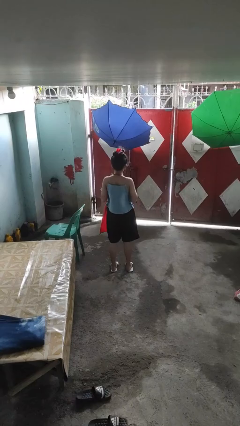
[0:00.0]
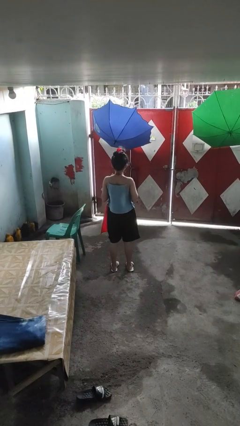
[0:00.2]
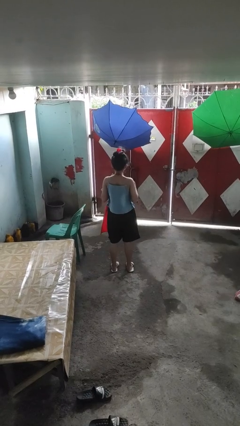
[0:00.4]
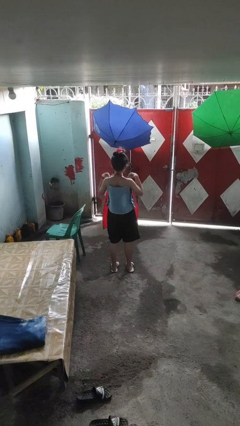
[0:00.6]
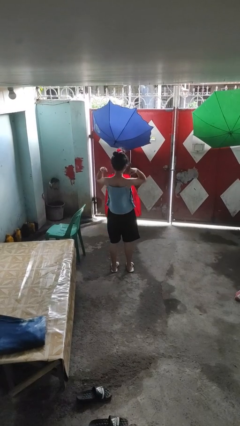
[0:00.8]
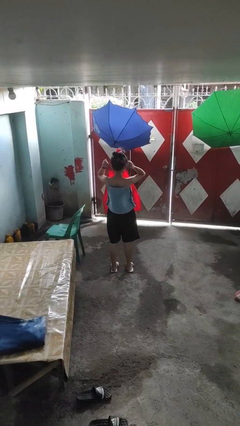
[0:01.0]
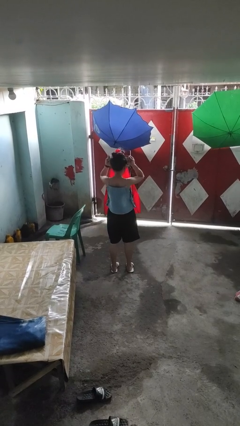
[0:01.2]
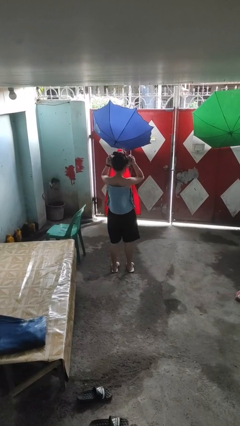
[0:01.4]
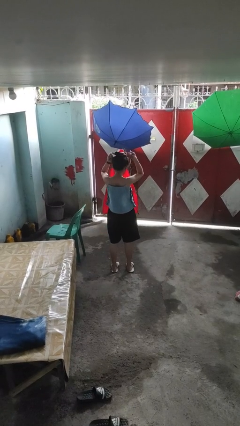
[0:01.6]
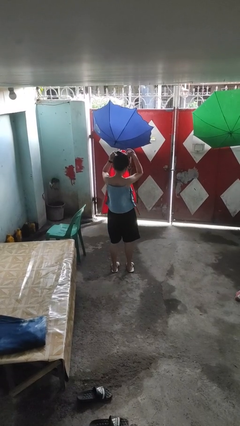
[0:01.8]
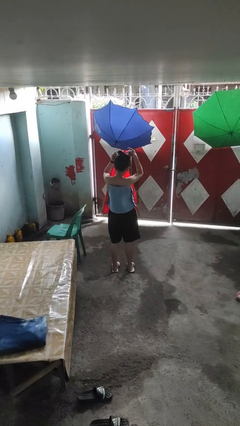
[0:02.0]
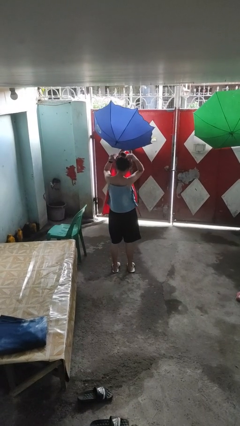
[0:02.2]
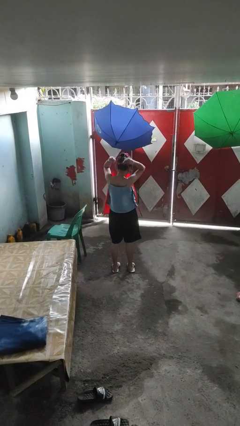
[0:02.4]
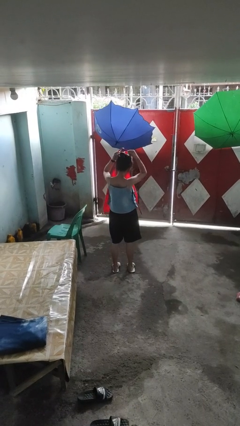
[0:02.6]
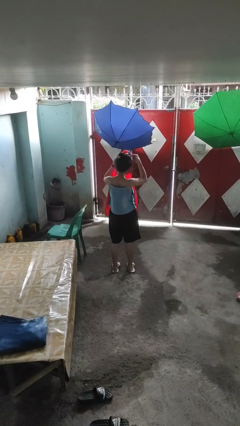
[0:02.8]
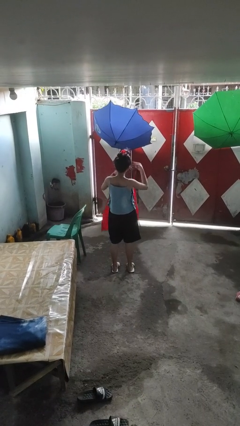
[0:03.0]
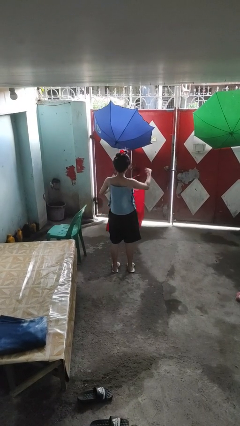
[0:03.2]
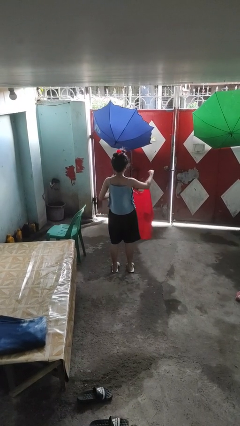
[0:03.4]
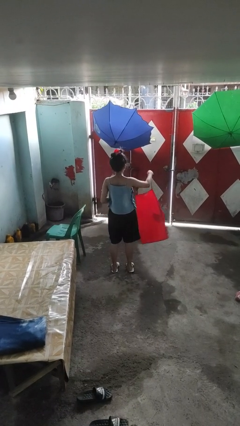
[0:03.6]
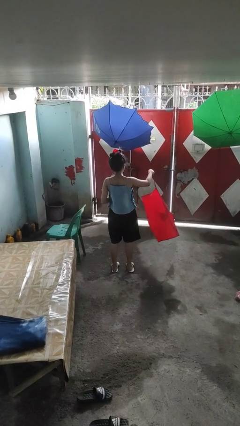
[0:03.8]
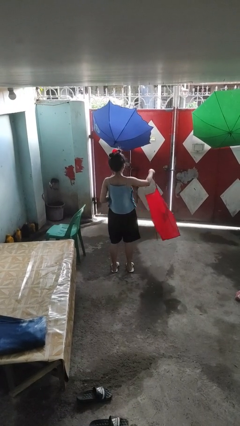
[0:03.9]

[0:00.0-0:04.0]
person takes off apron

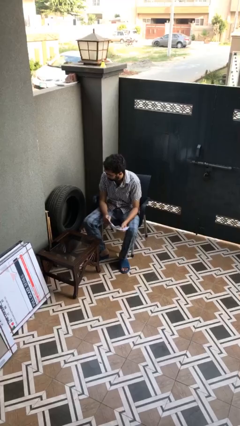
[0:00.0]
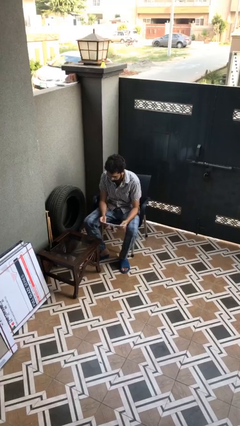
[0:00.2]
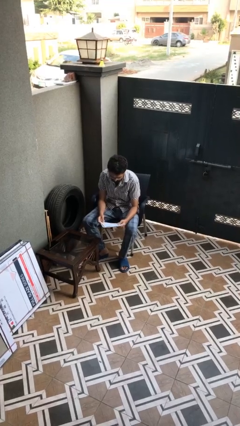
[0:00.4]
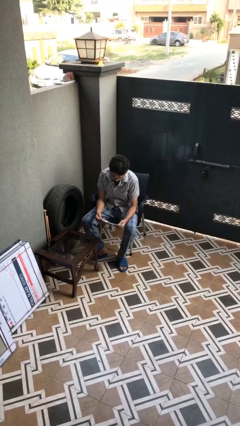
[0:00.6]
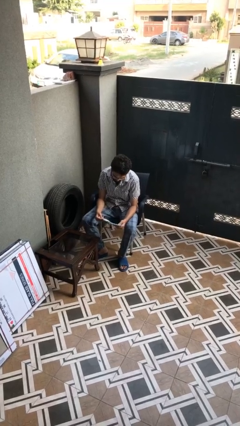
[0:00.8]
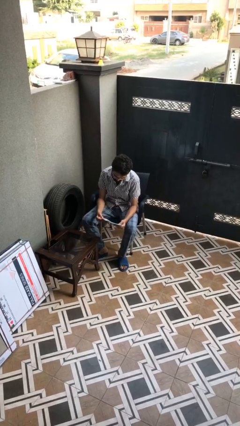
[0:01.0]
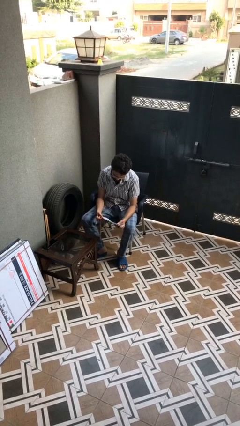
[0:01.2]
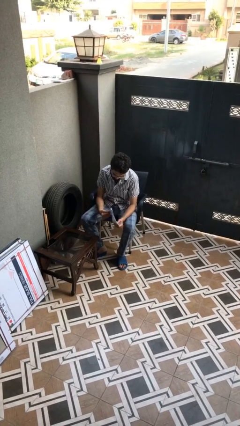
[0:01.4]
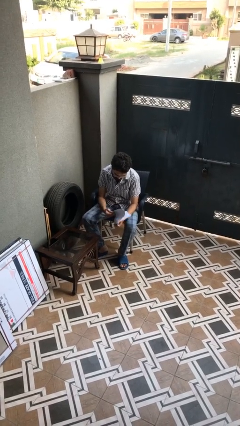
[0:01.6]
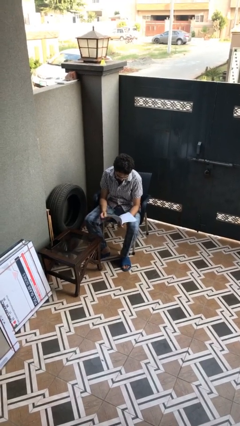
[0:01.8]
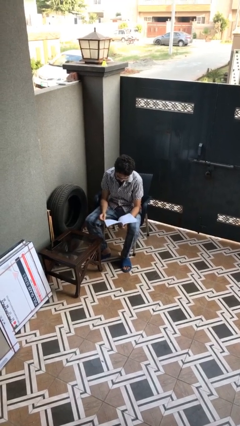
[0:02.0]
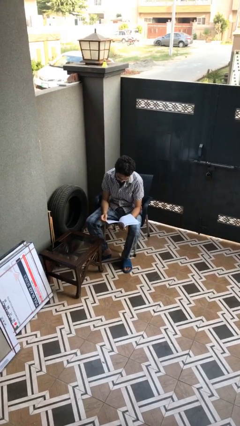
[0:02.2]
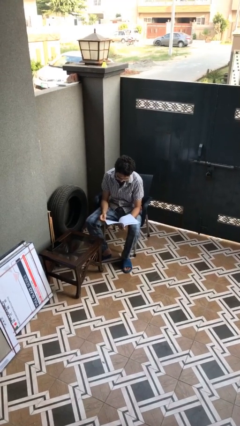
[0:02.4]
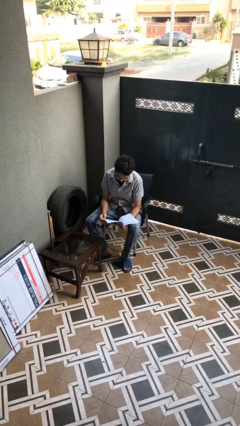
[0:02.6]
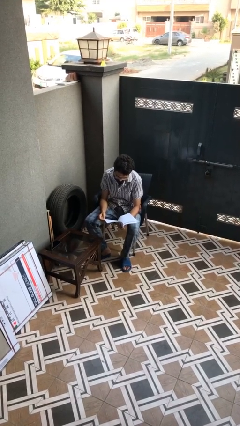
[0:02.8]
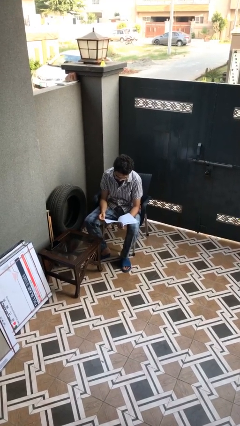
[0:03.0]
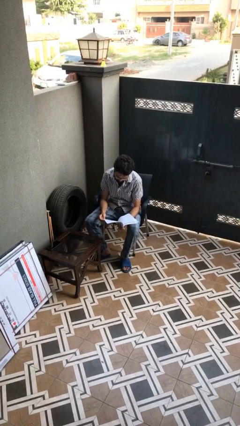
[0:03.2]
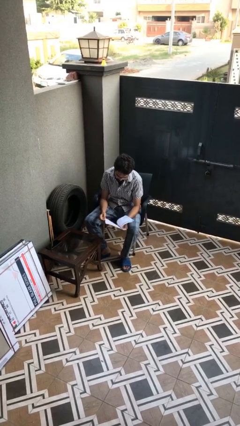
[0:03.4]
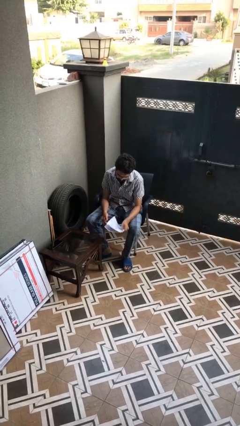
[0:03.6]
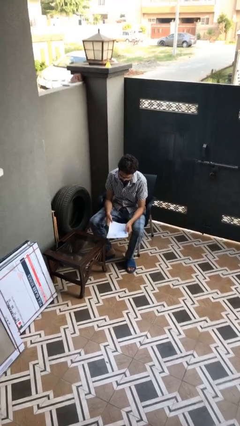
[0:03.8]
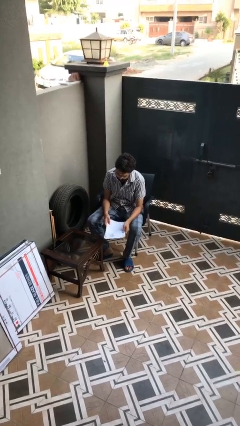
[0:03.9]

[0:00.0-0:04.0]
person reads document

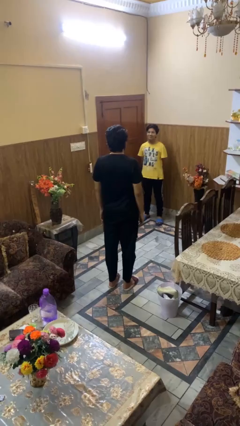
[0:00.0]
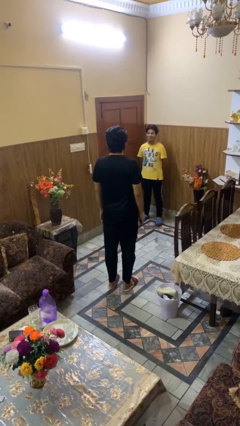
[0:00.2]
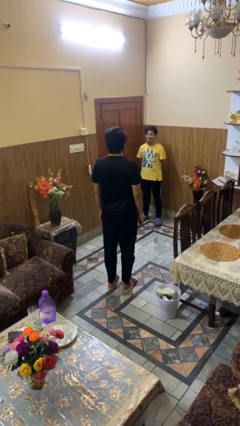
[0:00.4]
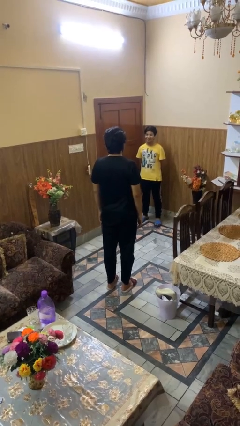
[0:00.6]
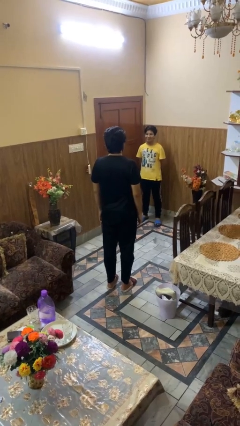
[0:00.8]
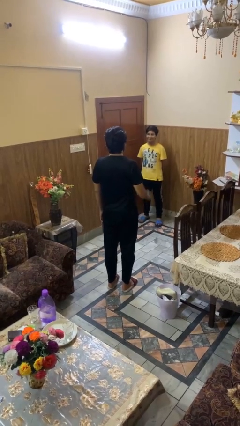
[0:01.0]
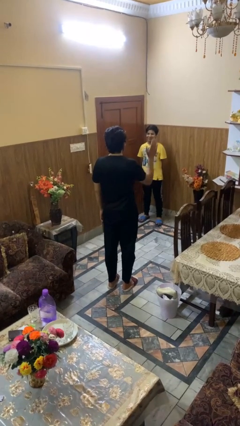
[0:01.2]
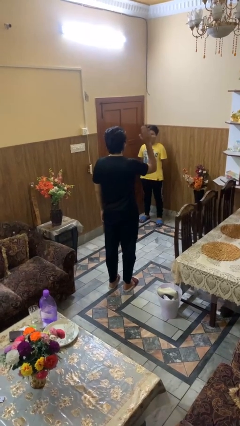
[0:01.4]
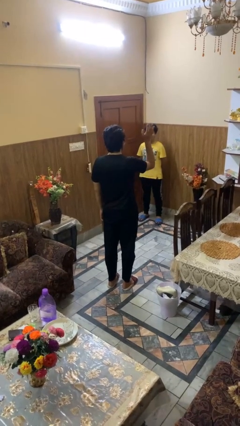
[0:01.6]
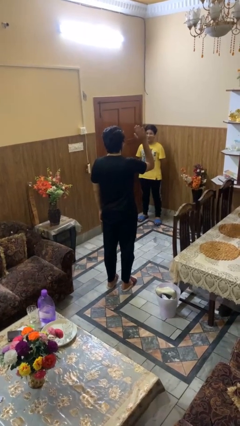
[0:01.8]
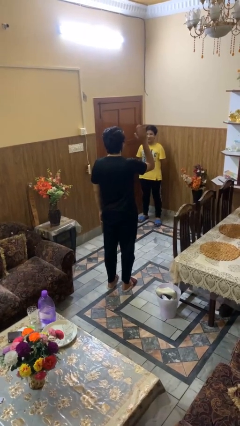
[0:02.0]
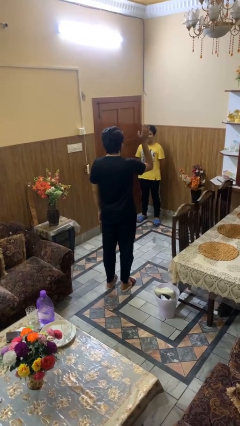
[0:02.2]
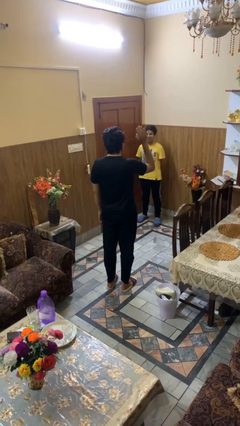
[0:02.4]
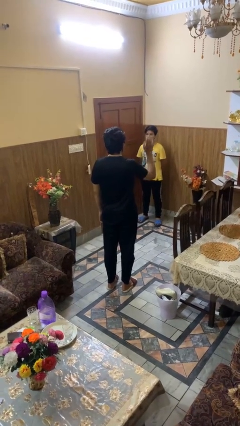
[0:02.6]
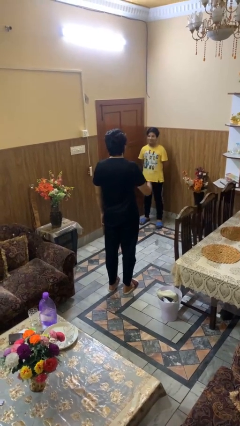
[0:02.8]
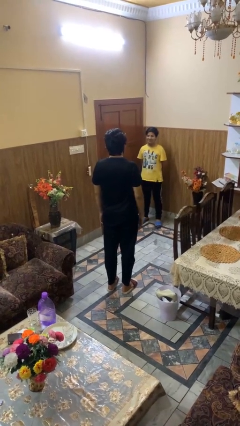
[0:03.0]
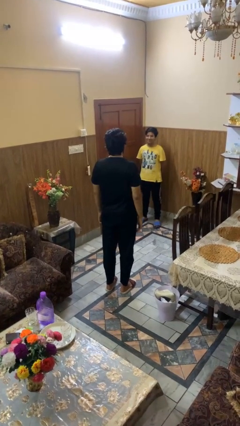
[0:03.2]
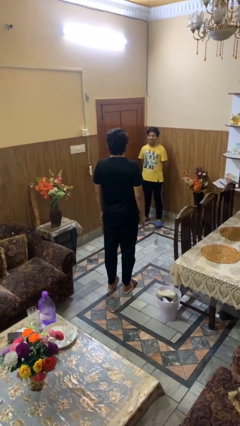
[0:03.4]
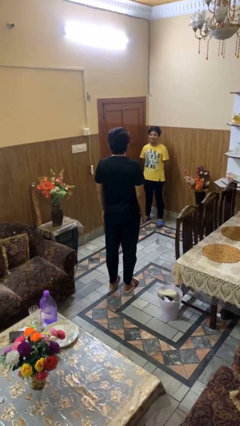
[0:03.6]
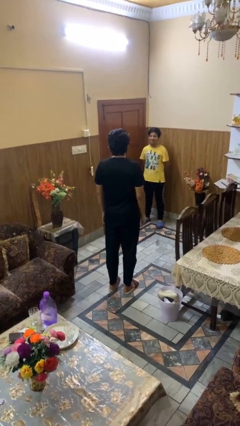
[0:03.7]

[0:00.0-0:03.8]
person waves at person

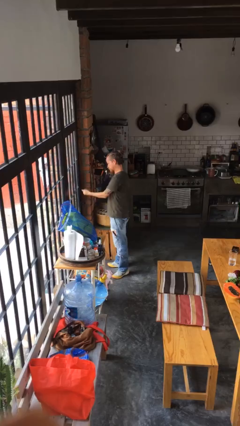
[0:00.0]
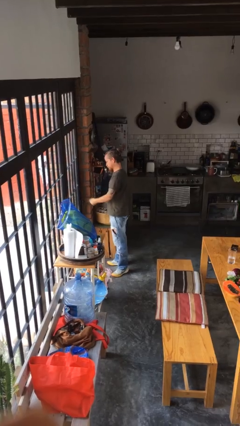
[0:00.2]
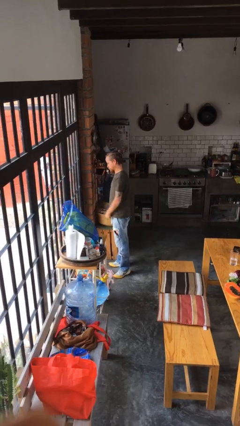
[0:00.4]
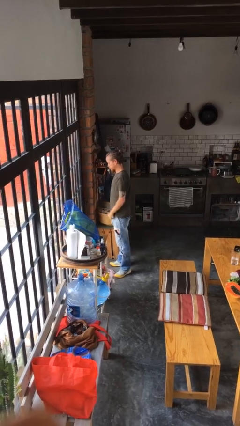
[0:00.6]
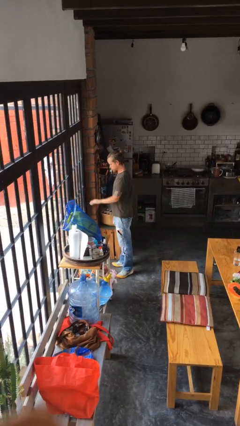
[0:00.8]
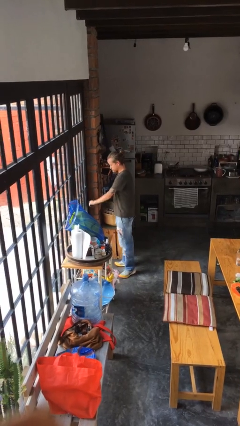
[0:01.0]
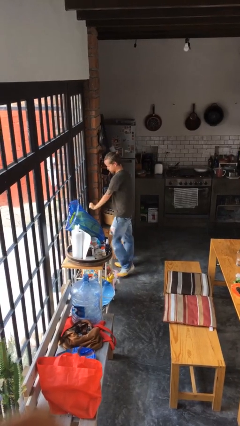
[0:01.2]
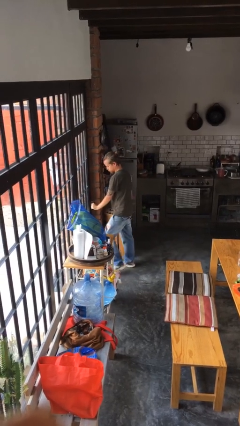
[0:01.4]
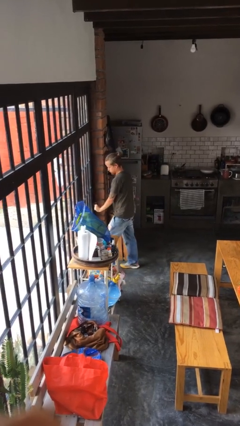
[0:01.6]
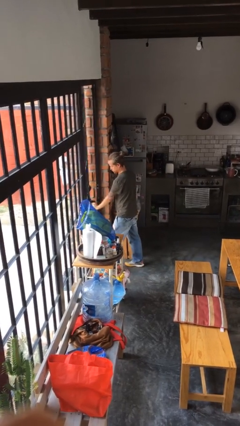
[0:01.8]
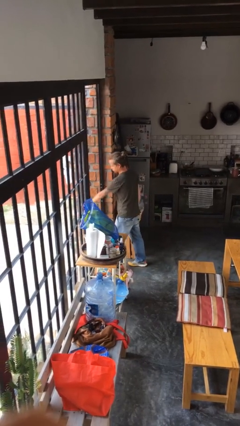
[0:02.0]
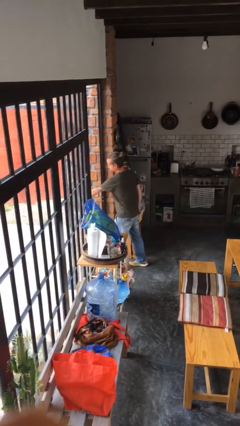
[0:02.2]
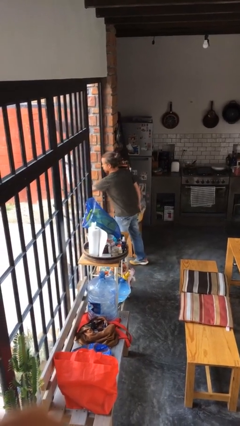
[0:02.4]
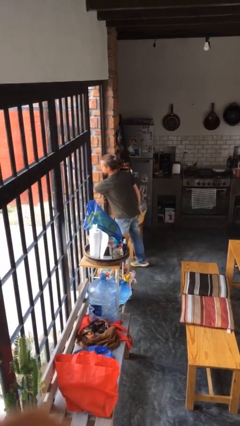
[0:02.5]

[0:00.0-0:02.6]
person opens facility door

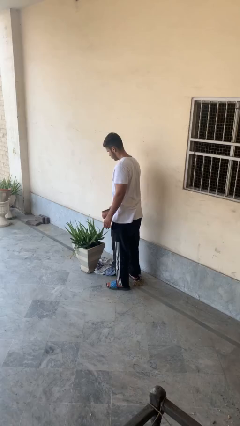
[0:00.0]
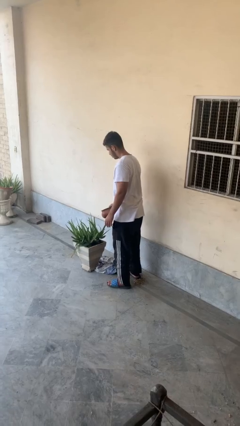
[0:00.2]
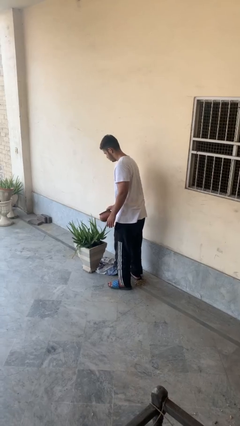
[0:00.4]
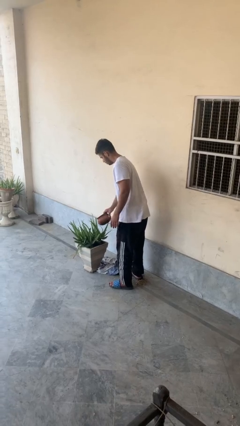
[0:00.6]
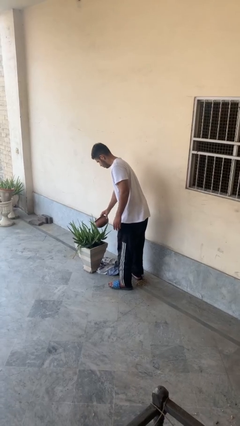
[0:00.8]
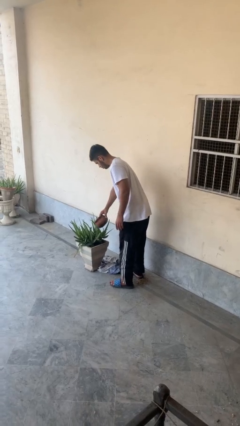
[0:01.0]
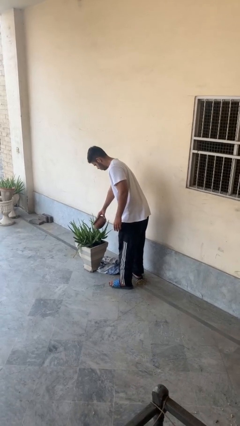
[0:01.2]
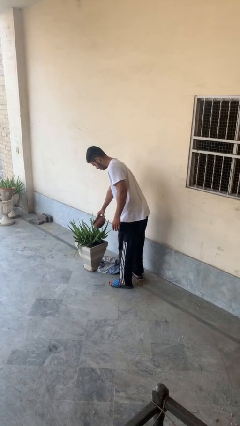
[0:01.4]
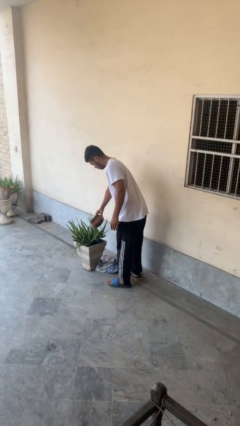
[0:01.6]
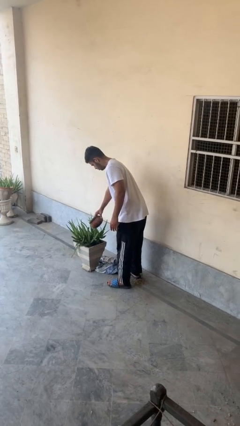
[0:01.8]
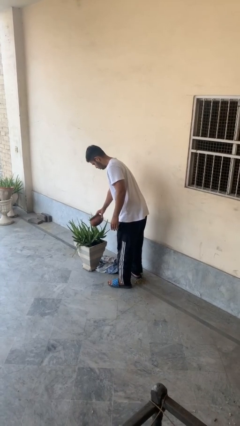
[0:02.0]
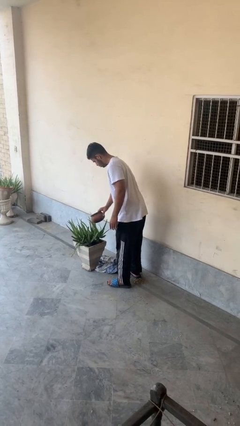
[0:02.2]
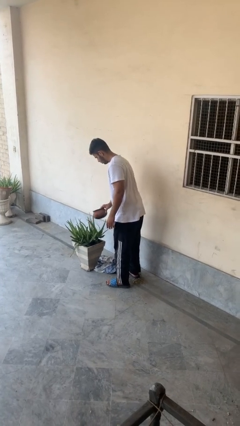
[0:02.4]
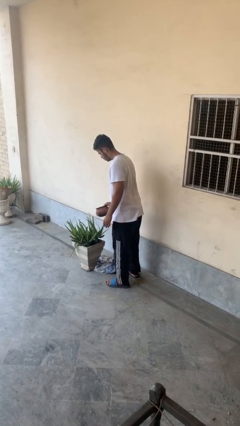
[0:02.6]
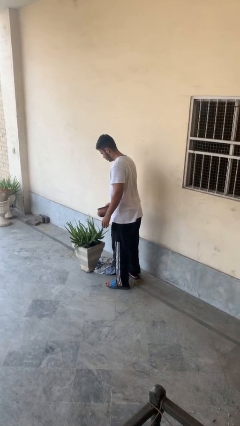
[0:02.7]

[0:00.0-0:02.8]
person waters houseplant

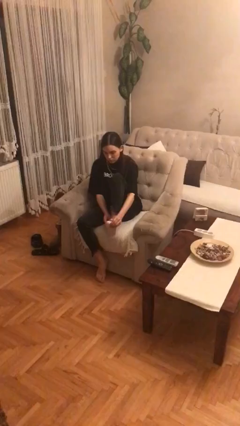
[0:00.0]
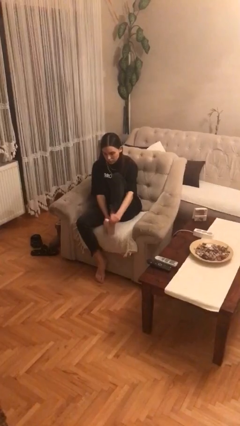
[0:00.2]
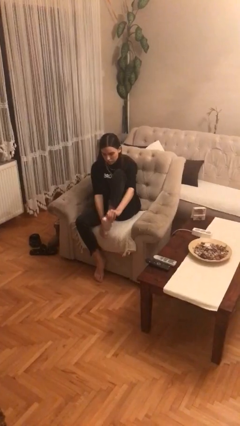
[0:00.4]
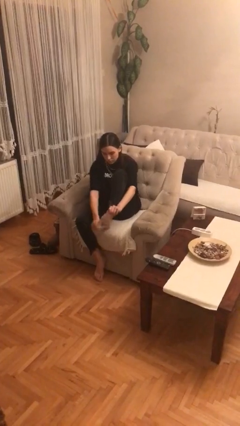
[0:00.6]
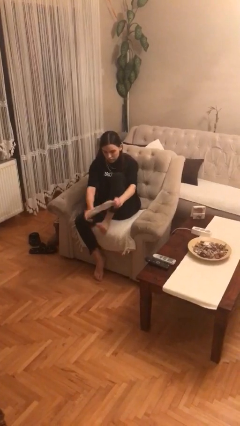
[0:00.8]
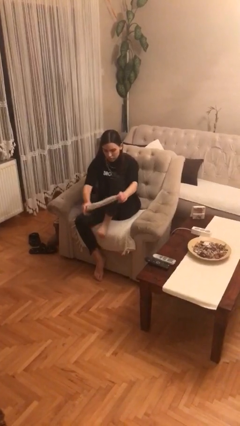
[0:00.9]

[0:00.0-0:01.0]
person takes off socks
